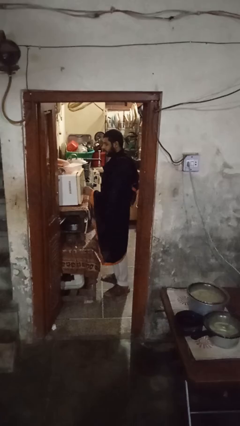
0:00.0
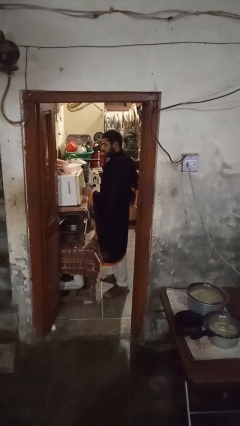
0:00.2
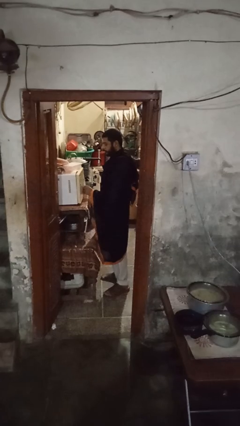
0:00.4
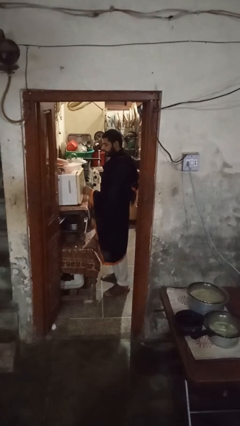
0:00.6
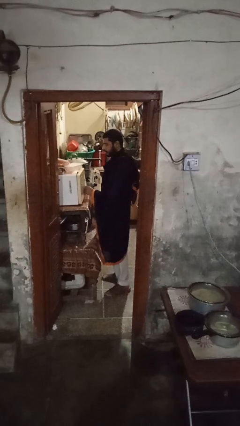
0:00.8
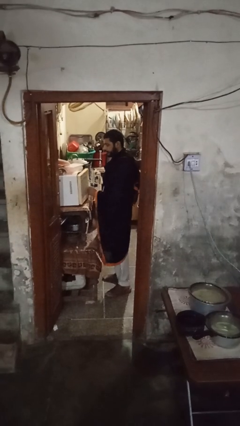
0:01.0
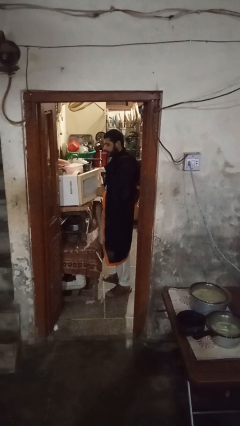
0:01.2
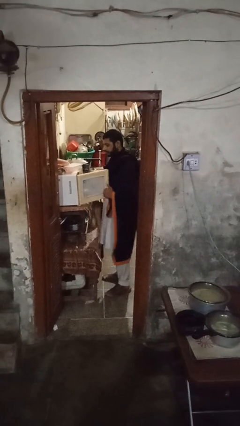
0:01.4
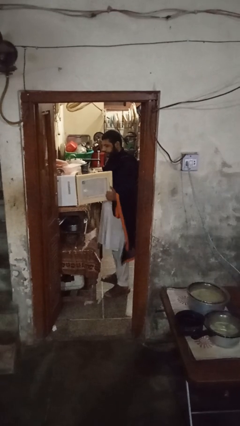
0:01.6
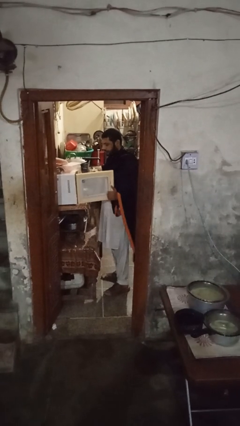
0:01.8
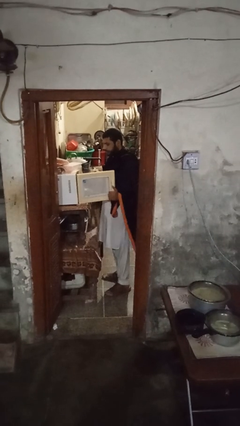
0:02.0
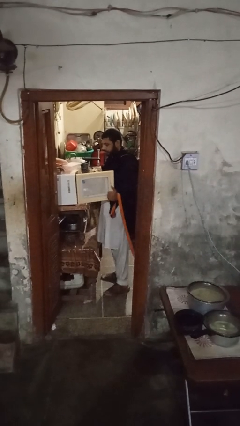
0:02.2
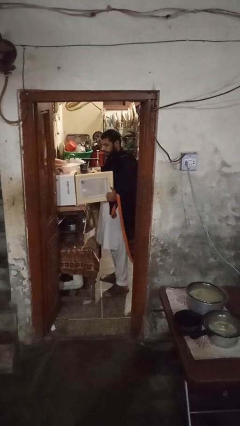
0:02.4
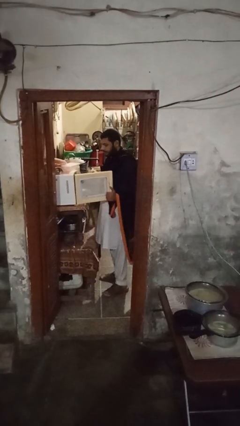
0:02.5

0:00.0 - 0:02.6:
person opens microwave

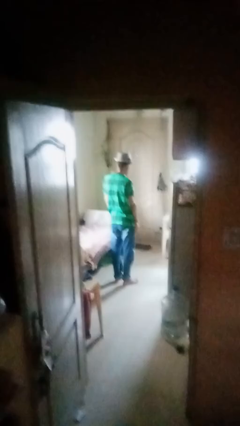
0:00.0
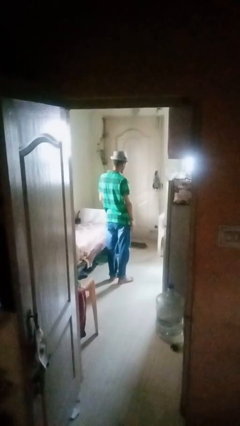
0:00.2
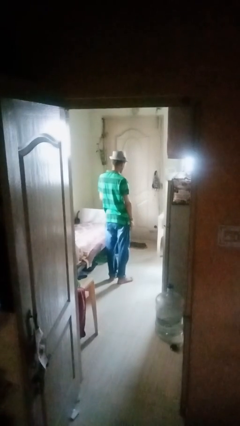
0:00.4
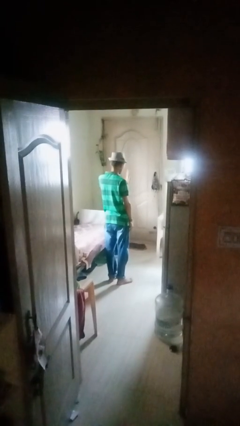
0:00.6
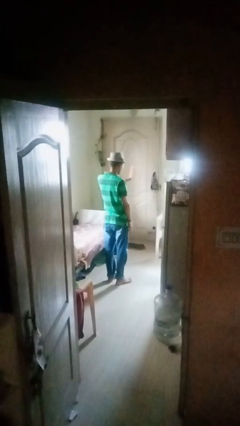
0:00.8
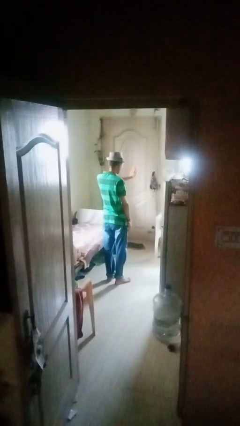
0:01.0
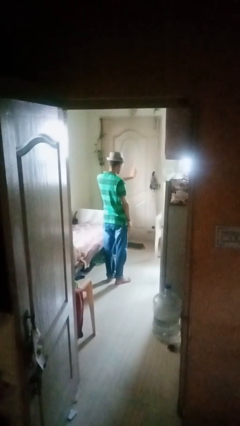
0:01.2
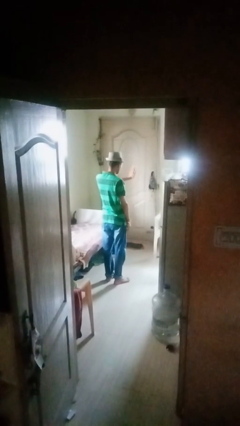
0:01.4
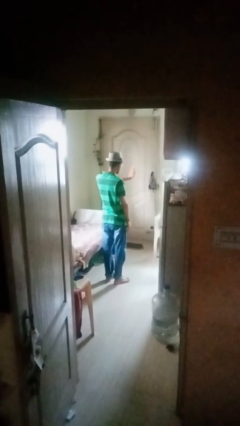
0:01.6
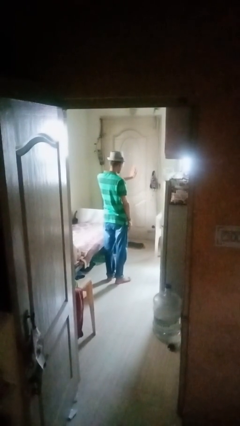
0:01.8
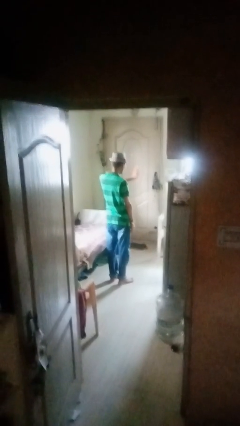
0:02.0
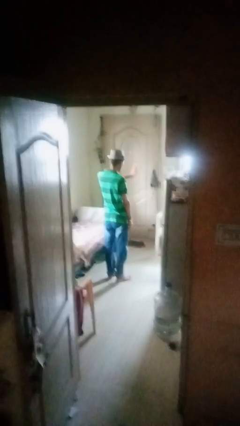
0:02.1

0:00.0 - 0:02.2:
person gestures stop

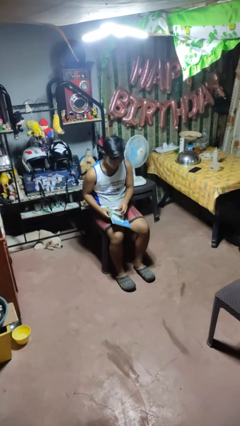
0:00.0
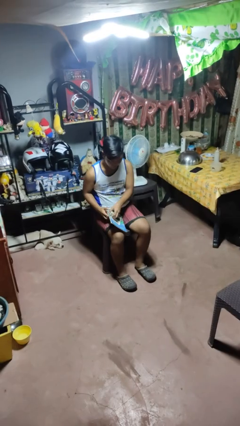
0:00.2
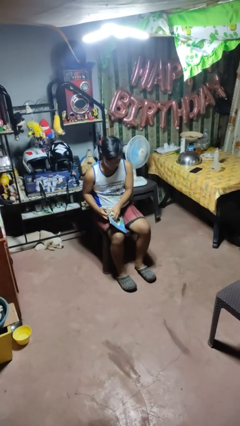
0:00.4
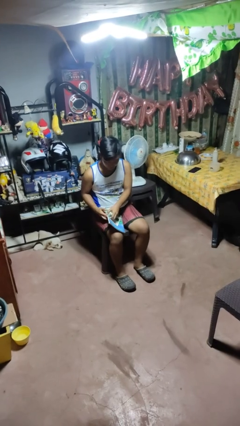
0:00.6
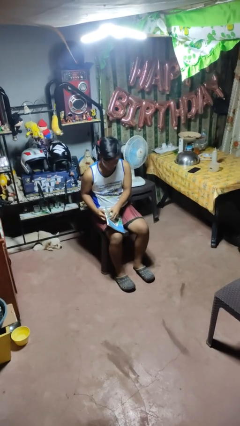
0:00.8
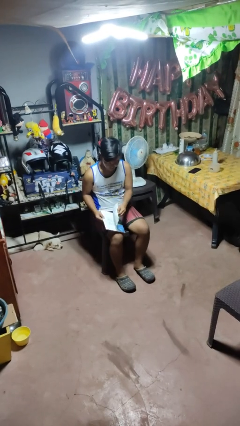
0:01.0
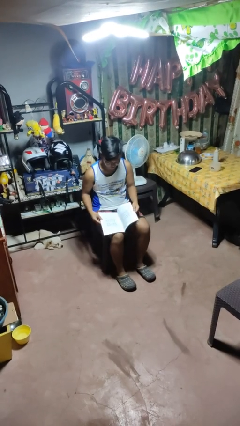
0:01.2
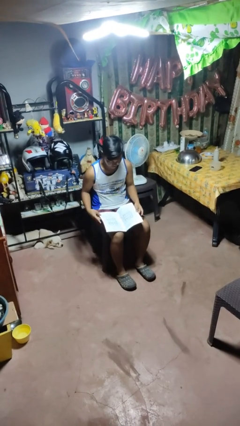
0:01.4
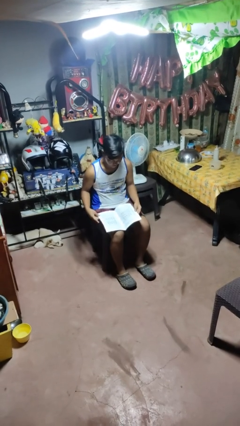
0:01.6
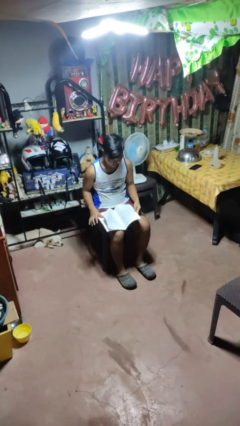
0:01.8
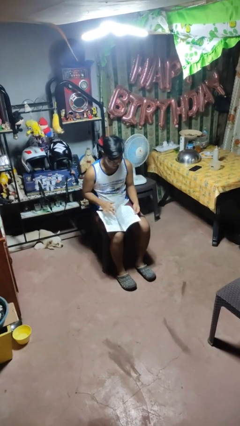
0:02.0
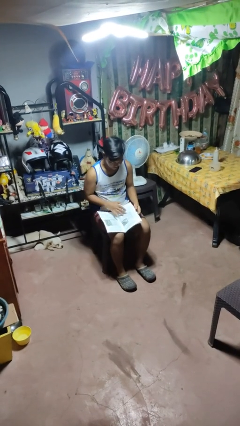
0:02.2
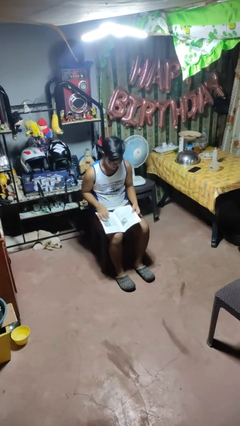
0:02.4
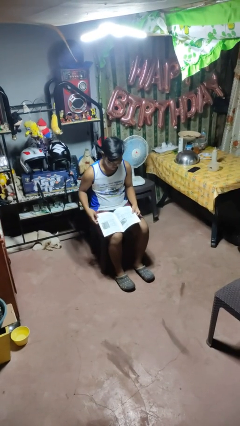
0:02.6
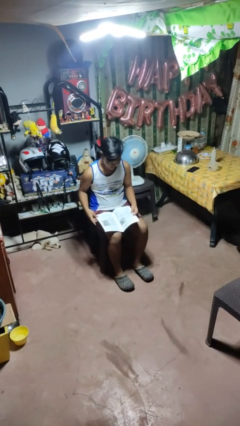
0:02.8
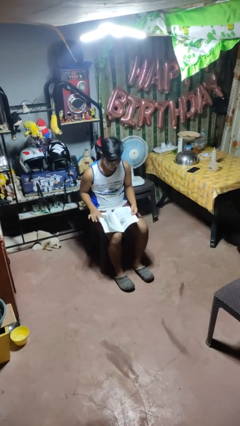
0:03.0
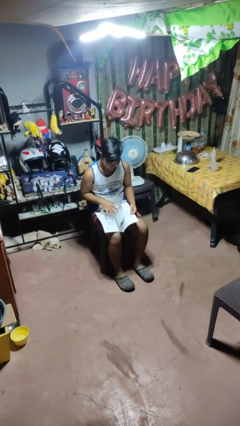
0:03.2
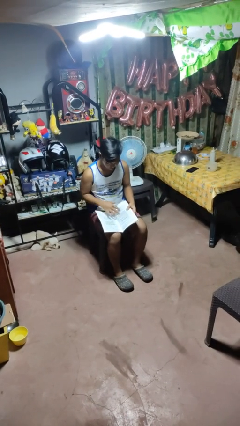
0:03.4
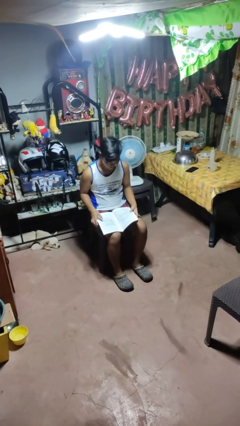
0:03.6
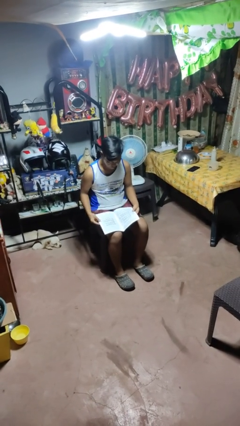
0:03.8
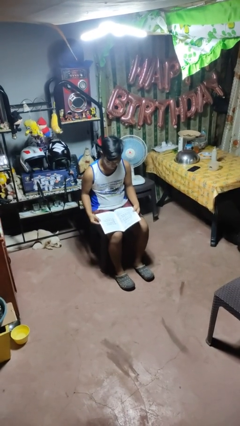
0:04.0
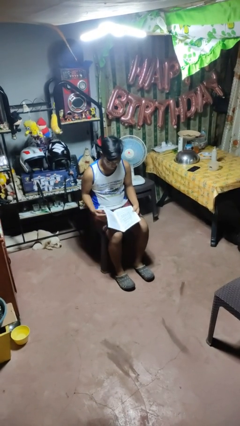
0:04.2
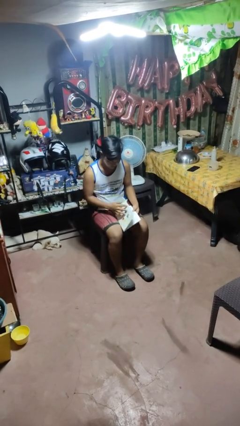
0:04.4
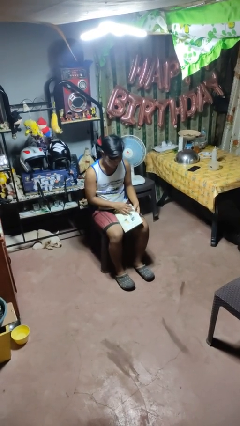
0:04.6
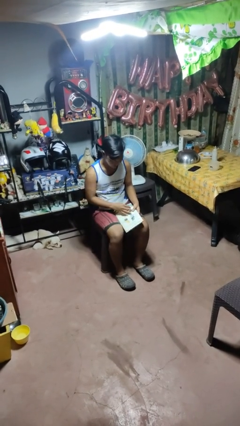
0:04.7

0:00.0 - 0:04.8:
person reads magazine

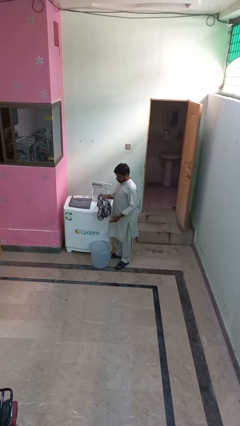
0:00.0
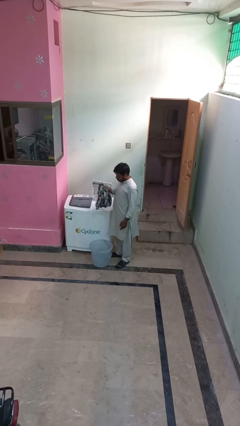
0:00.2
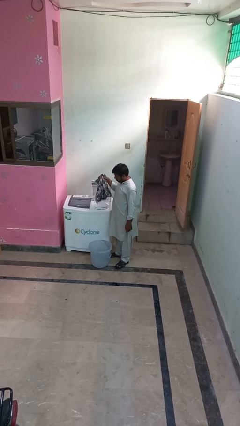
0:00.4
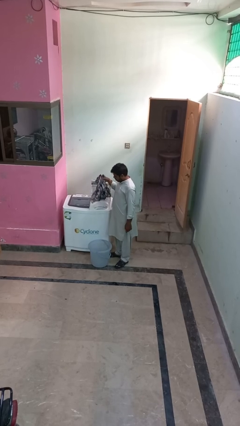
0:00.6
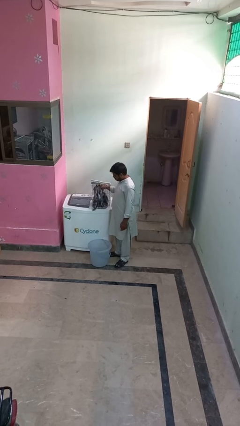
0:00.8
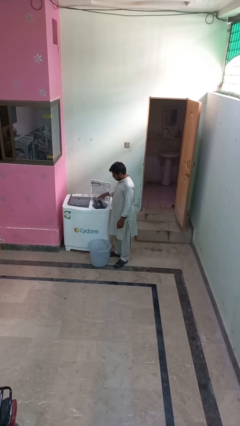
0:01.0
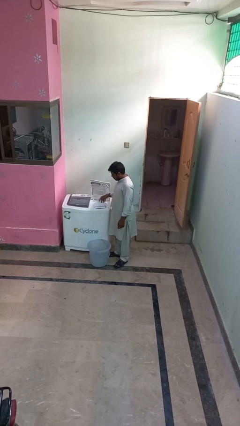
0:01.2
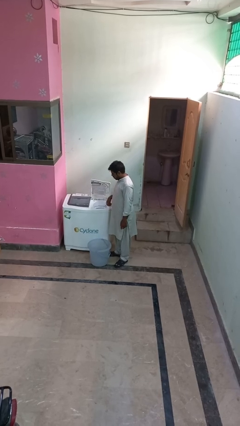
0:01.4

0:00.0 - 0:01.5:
person loads dryer

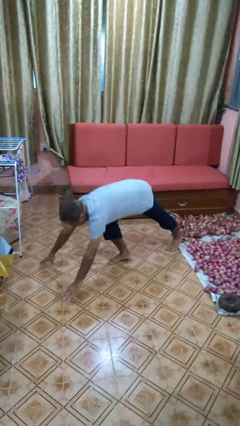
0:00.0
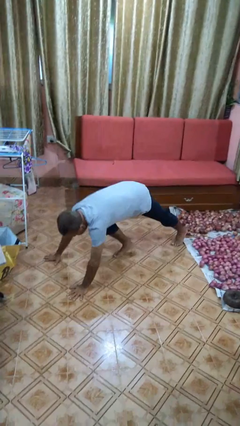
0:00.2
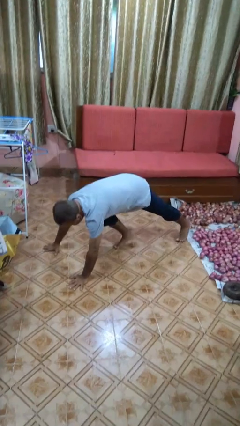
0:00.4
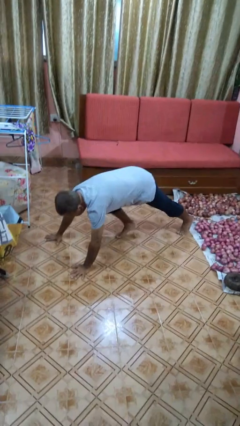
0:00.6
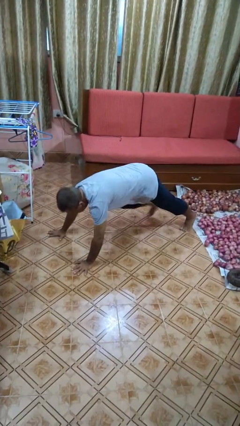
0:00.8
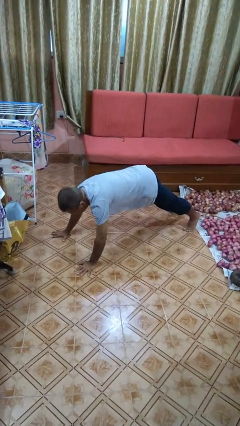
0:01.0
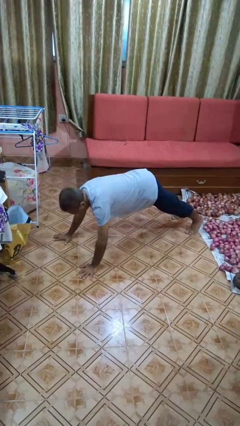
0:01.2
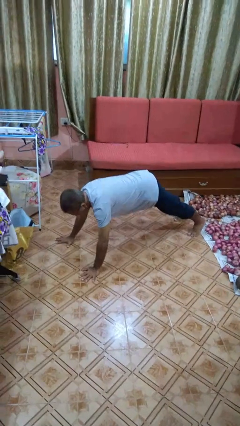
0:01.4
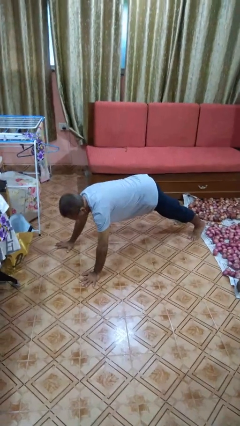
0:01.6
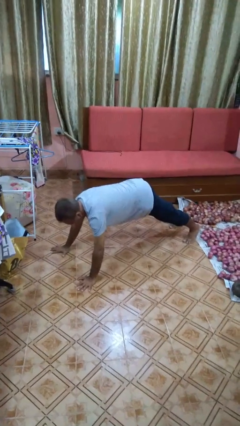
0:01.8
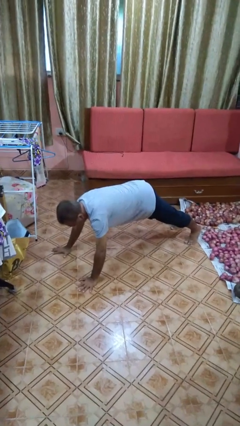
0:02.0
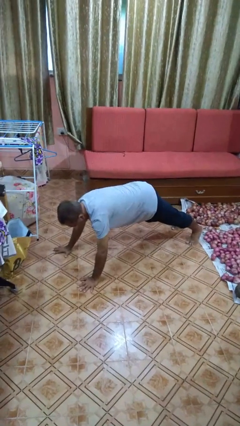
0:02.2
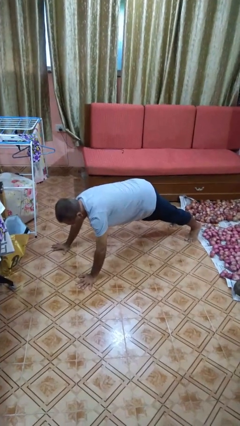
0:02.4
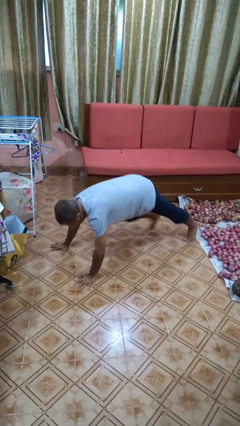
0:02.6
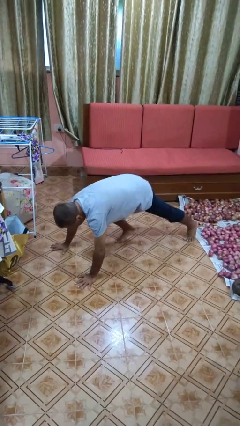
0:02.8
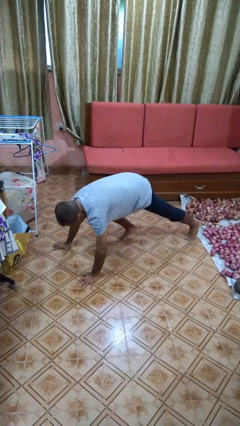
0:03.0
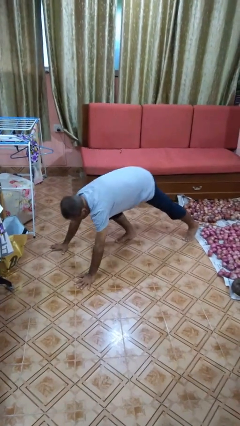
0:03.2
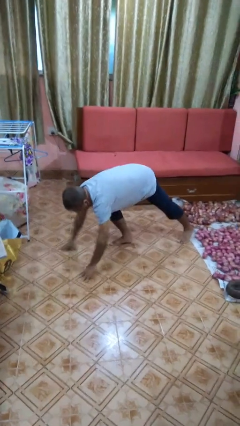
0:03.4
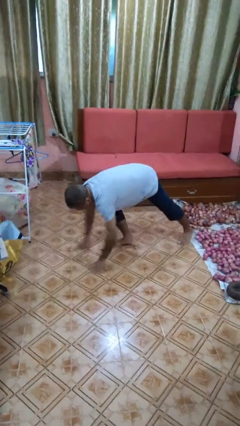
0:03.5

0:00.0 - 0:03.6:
person exercises with plank

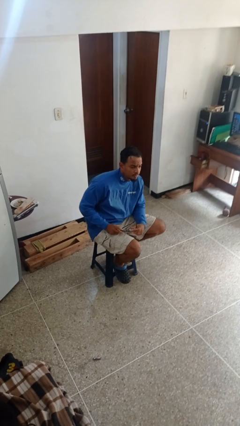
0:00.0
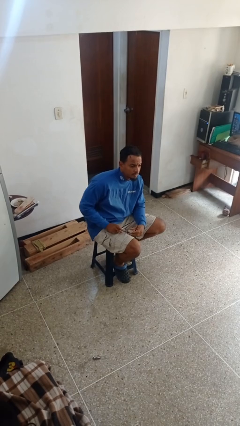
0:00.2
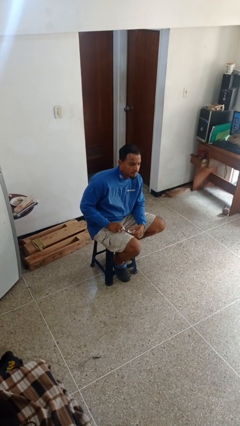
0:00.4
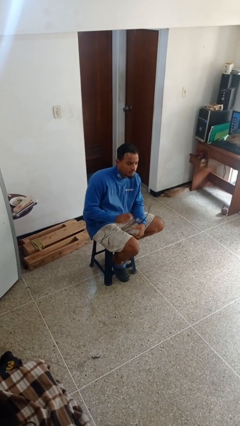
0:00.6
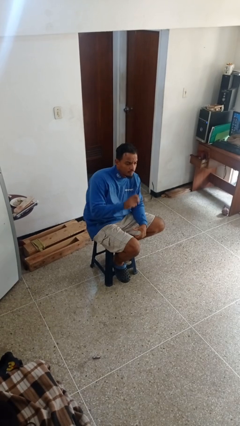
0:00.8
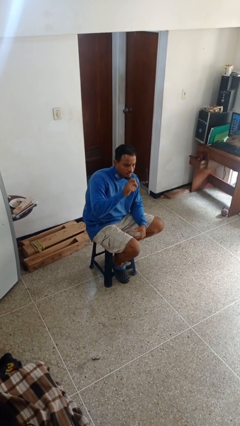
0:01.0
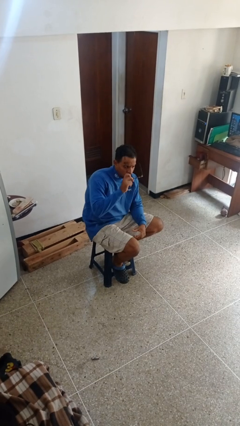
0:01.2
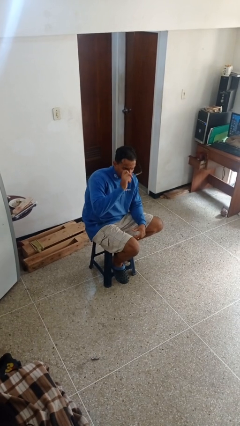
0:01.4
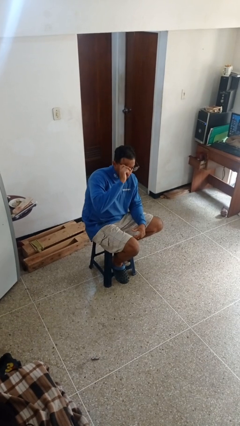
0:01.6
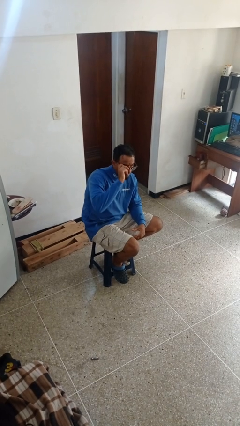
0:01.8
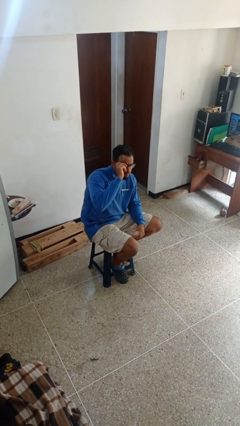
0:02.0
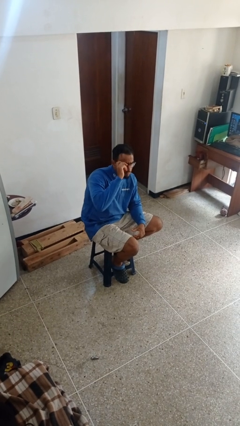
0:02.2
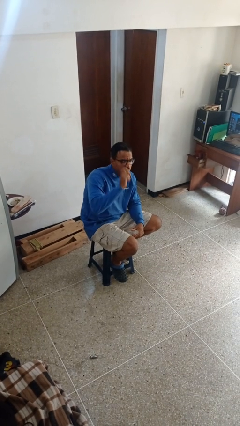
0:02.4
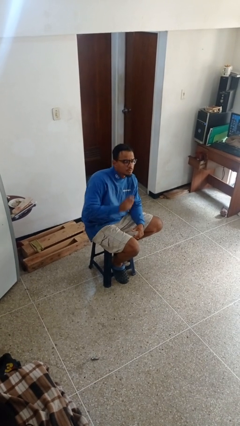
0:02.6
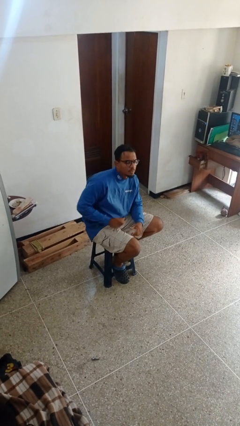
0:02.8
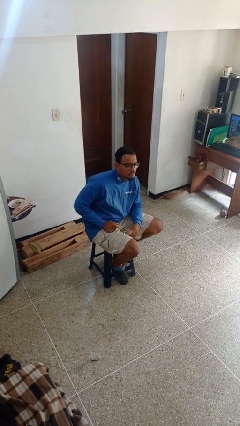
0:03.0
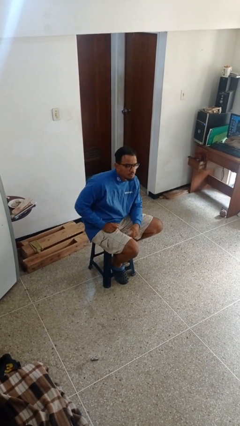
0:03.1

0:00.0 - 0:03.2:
person puts on glasses
